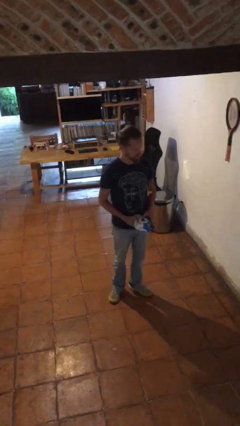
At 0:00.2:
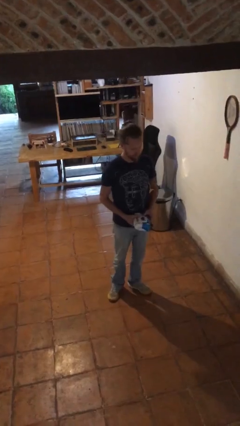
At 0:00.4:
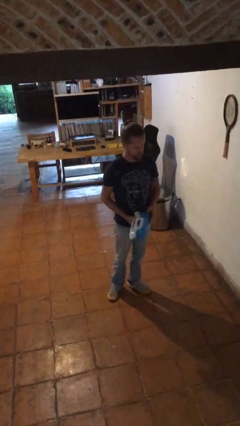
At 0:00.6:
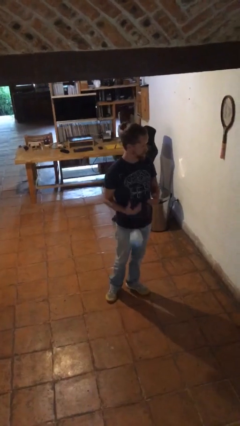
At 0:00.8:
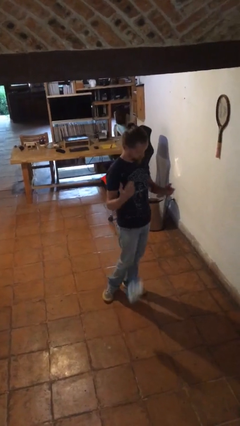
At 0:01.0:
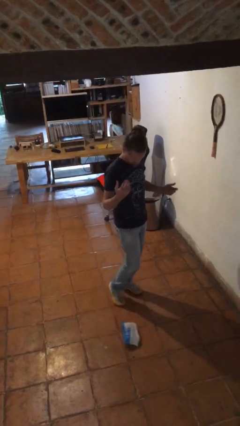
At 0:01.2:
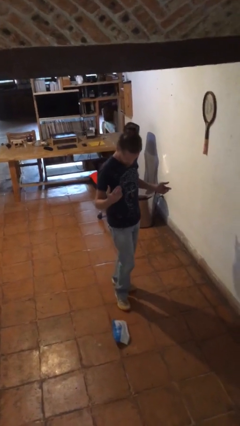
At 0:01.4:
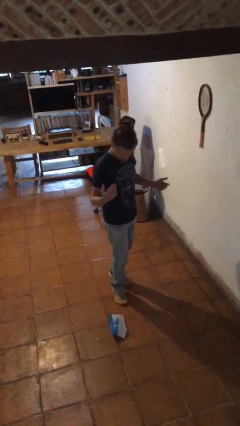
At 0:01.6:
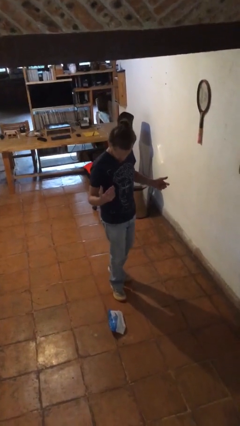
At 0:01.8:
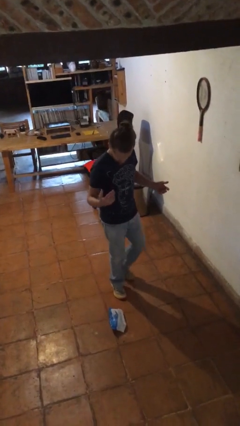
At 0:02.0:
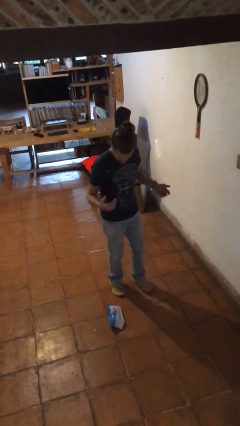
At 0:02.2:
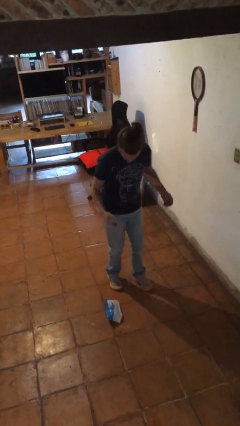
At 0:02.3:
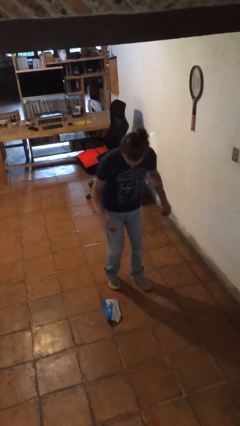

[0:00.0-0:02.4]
person drops object

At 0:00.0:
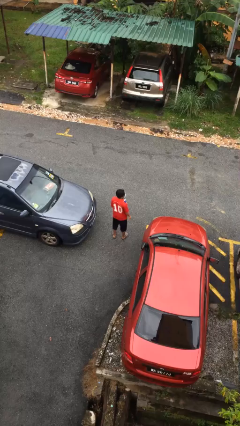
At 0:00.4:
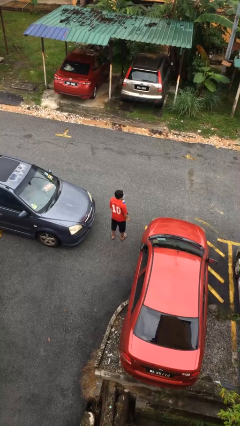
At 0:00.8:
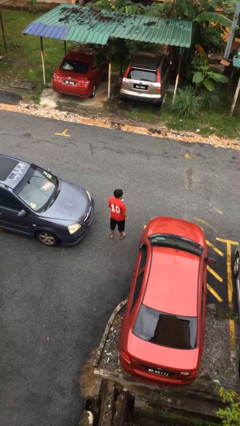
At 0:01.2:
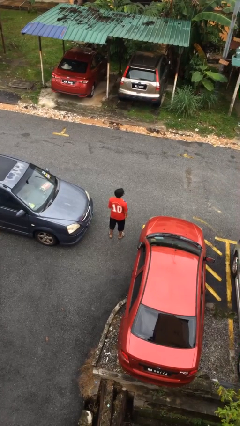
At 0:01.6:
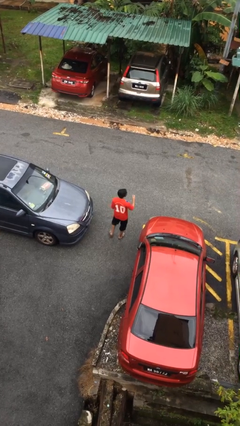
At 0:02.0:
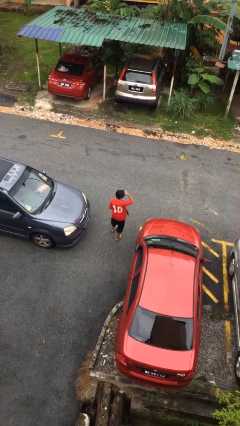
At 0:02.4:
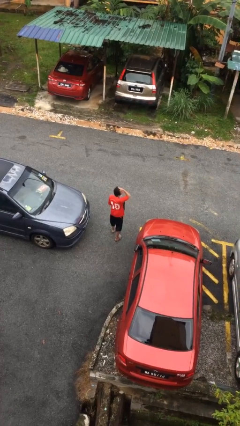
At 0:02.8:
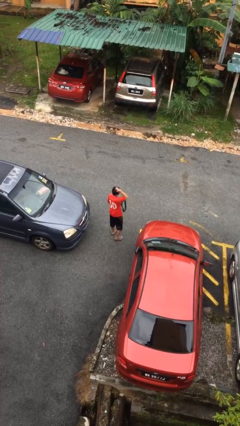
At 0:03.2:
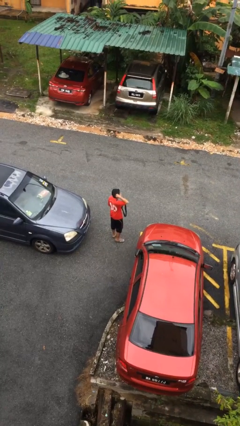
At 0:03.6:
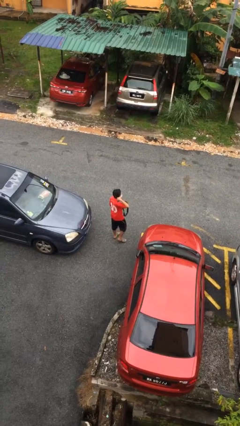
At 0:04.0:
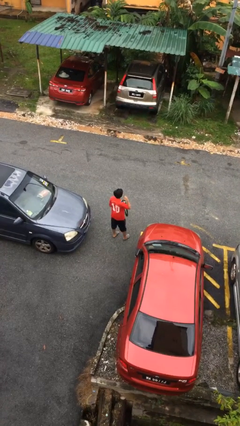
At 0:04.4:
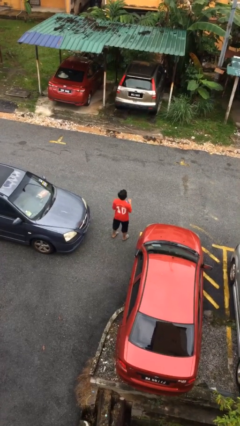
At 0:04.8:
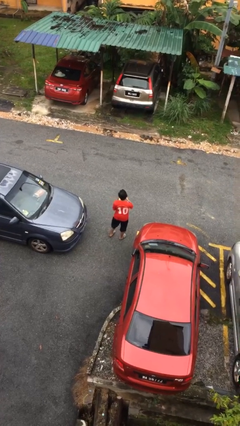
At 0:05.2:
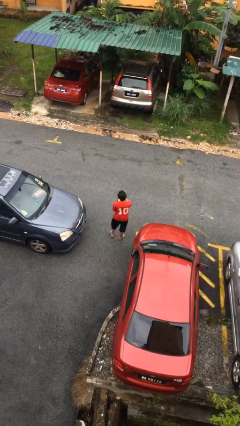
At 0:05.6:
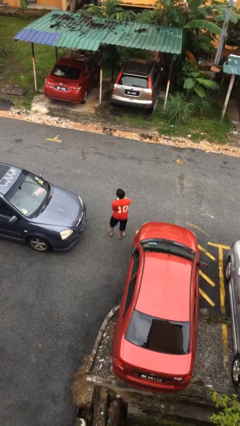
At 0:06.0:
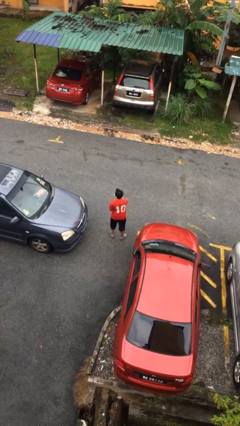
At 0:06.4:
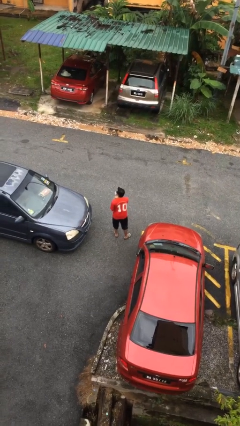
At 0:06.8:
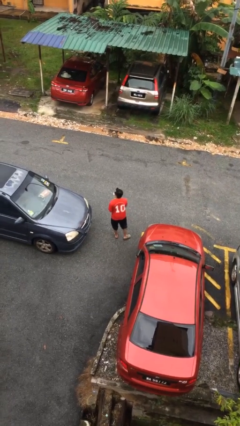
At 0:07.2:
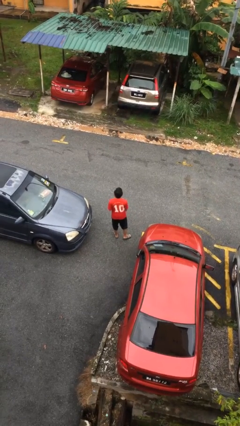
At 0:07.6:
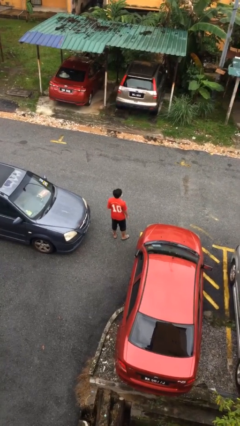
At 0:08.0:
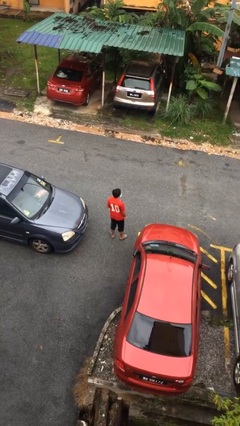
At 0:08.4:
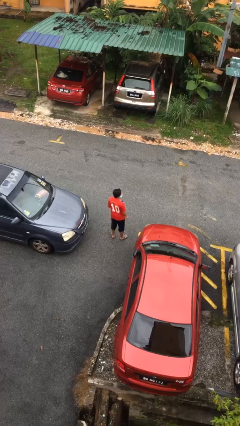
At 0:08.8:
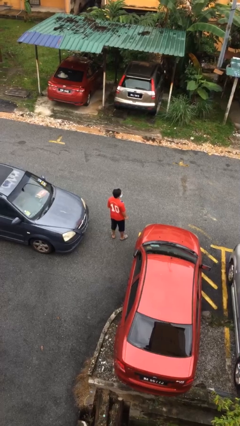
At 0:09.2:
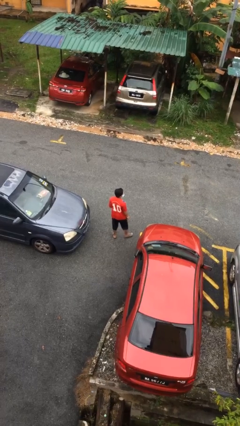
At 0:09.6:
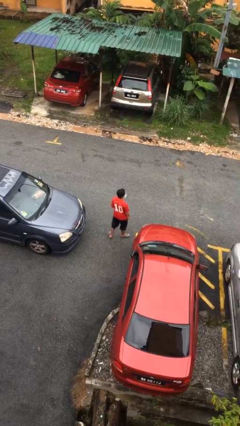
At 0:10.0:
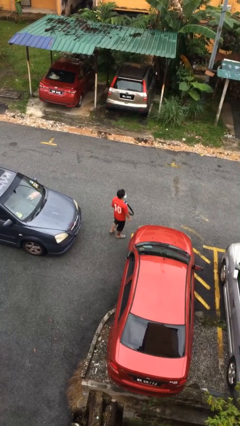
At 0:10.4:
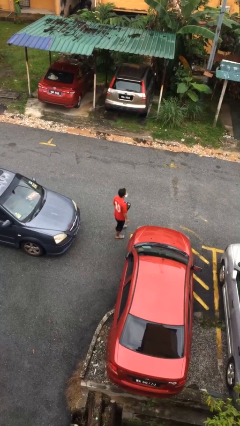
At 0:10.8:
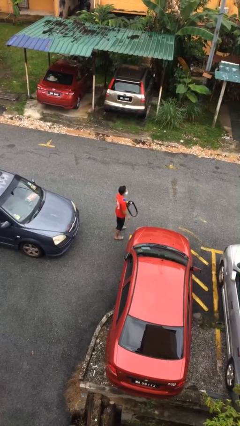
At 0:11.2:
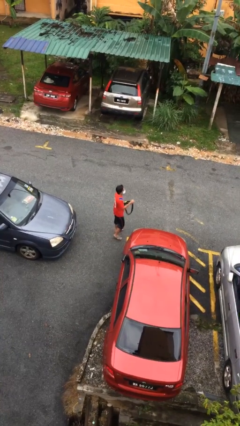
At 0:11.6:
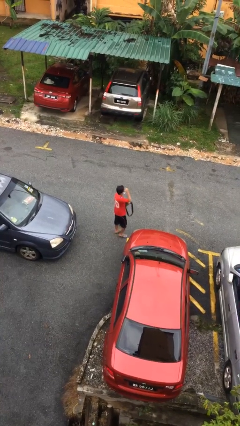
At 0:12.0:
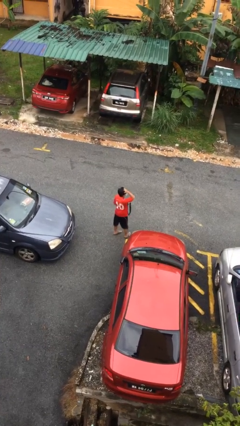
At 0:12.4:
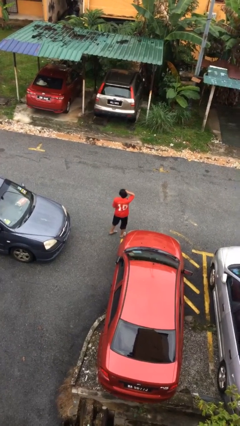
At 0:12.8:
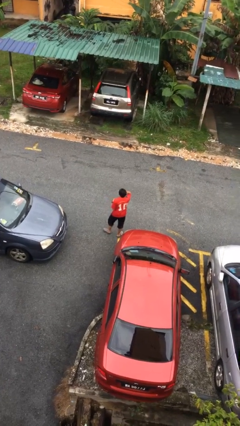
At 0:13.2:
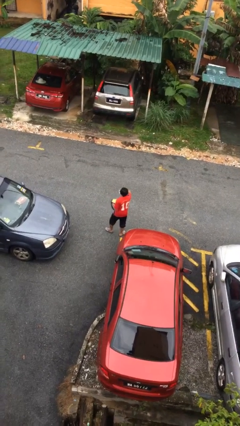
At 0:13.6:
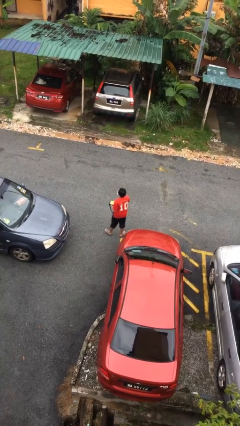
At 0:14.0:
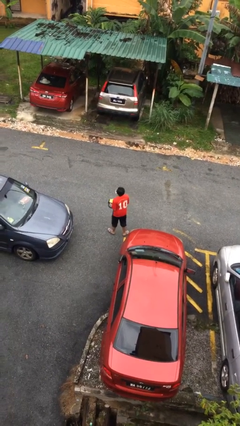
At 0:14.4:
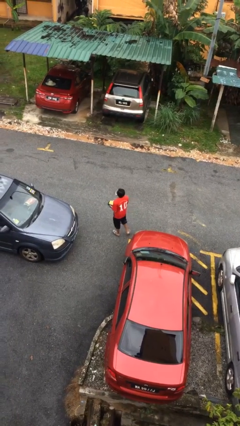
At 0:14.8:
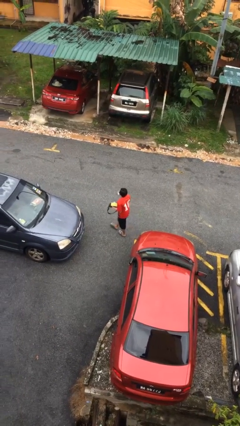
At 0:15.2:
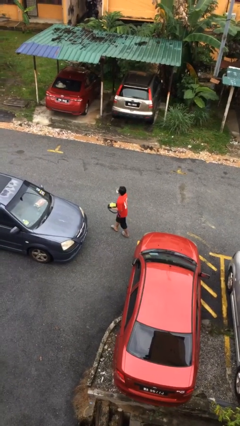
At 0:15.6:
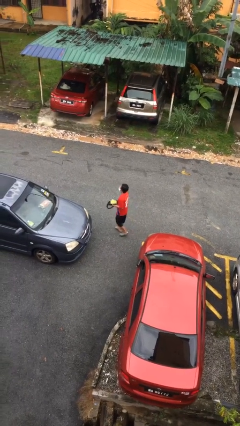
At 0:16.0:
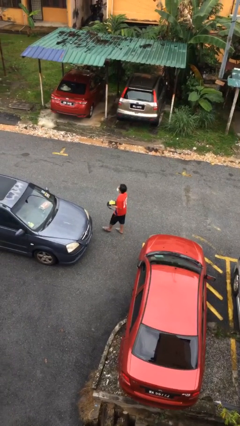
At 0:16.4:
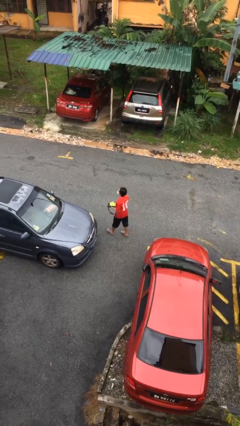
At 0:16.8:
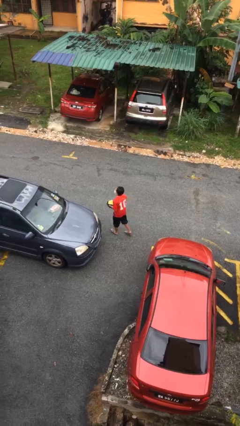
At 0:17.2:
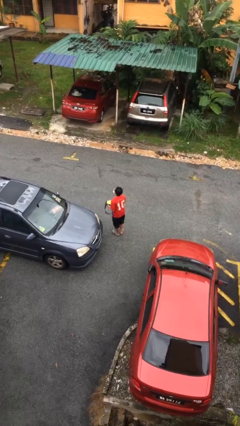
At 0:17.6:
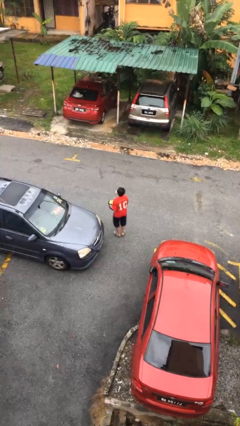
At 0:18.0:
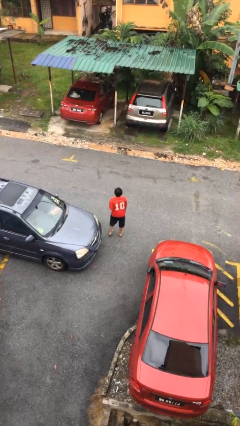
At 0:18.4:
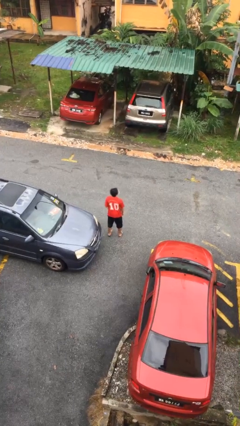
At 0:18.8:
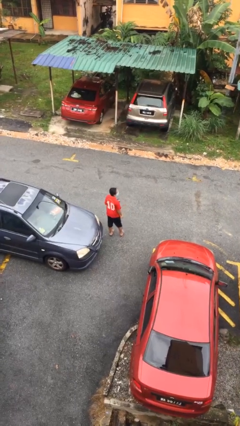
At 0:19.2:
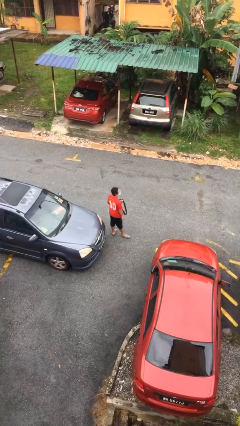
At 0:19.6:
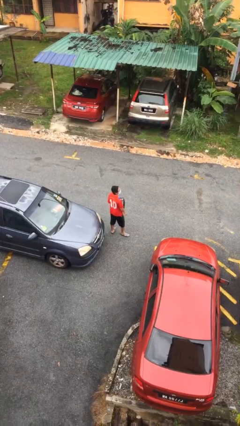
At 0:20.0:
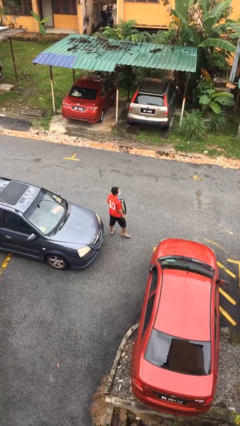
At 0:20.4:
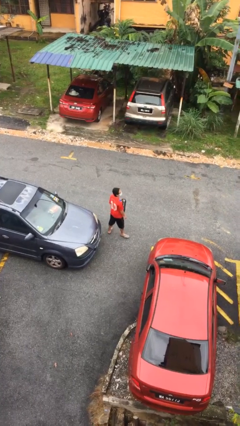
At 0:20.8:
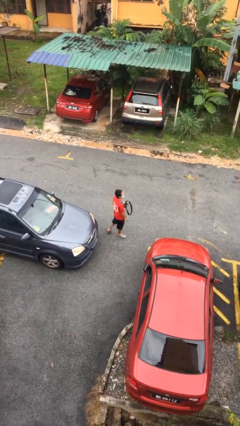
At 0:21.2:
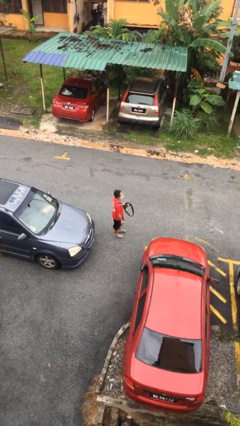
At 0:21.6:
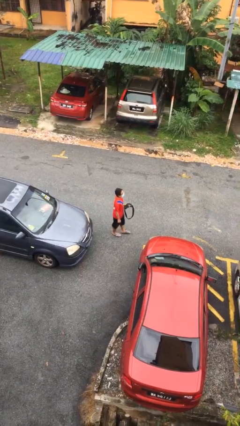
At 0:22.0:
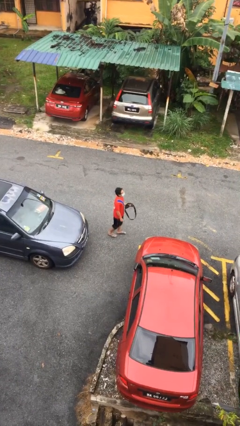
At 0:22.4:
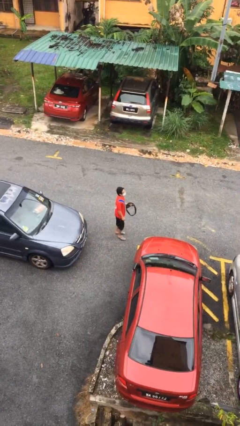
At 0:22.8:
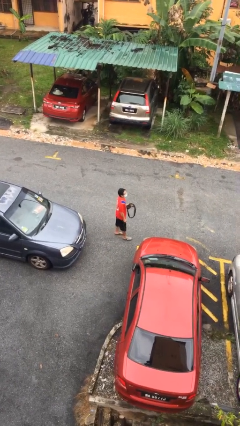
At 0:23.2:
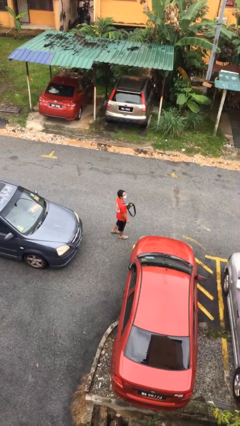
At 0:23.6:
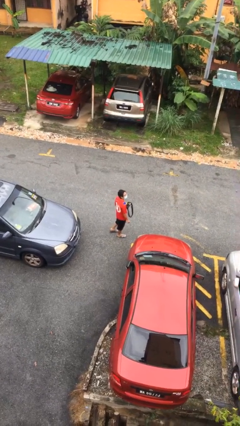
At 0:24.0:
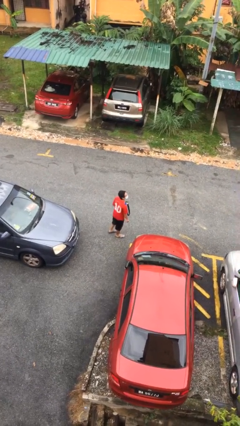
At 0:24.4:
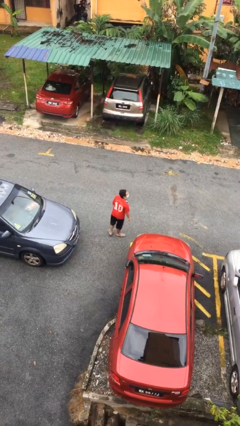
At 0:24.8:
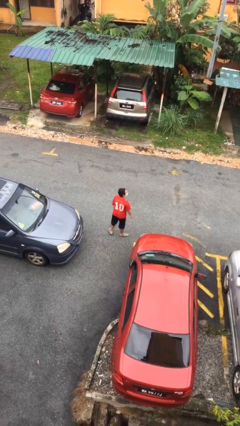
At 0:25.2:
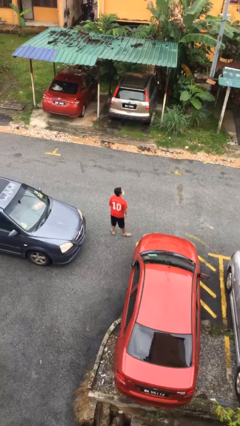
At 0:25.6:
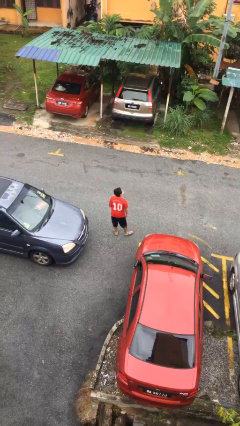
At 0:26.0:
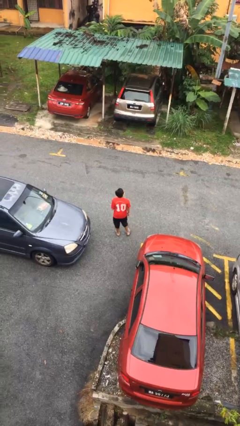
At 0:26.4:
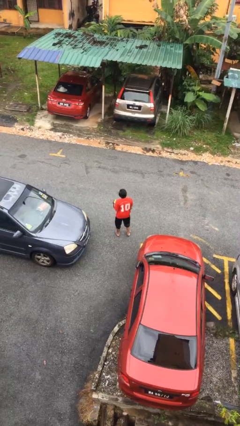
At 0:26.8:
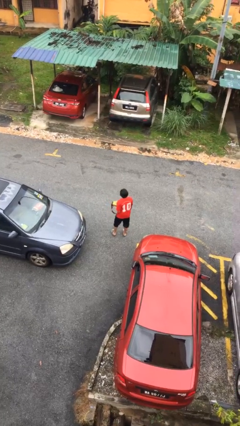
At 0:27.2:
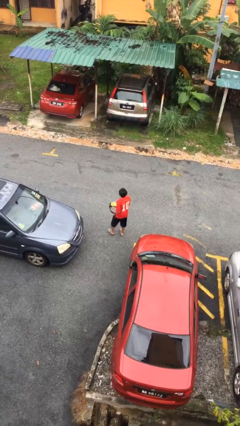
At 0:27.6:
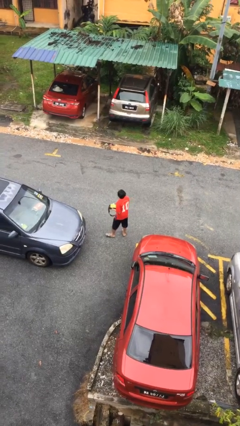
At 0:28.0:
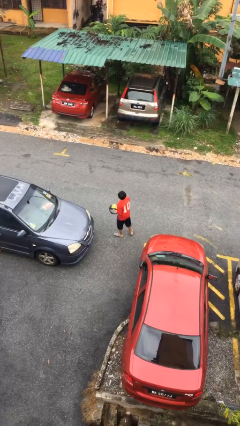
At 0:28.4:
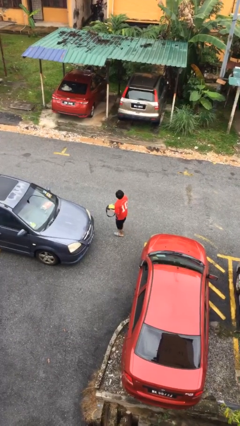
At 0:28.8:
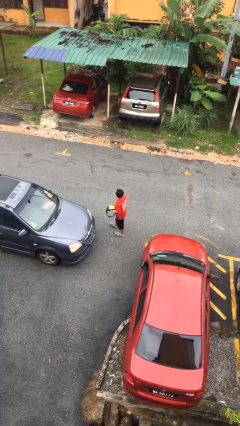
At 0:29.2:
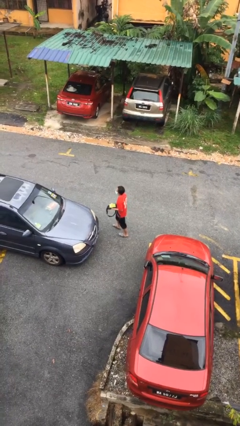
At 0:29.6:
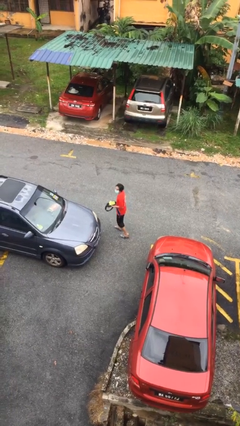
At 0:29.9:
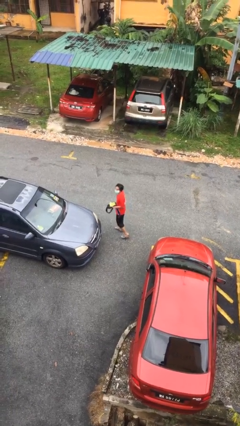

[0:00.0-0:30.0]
person walks

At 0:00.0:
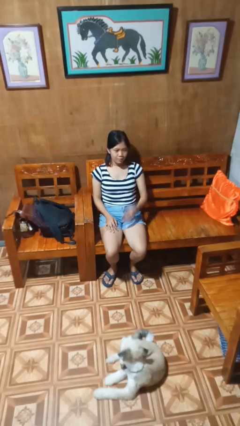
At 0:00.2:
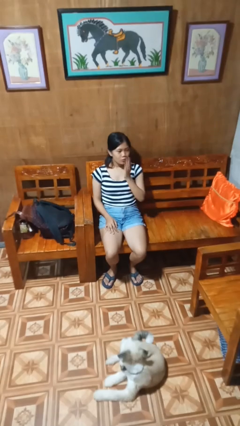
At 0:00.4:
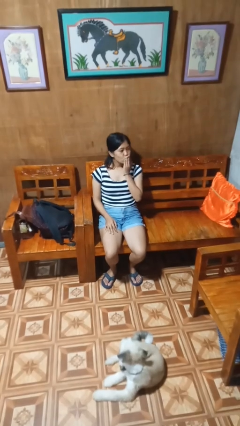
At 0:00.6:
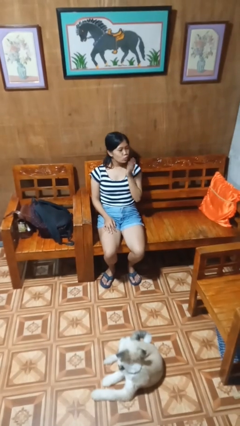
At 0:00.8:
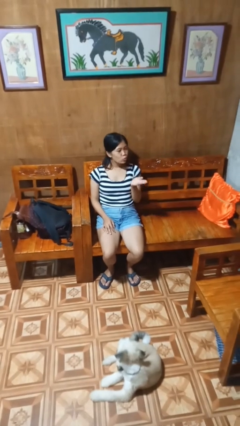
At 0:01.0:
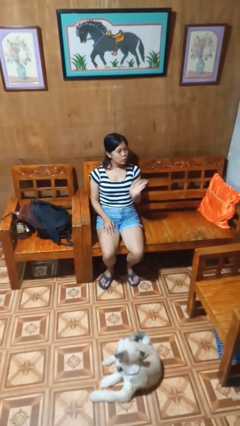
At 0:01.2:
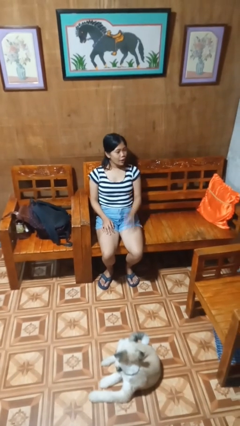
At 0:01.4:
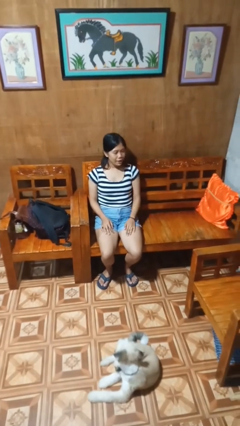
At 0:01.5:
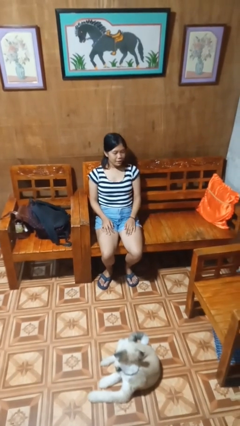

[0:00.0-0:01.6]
person gestures blow kiss
